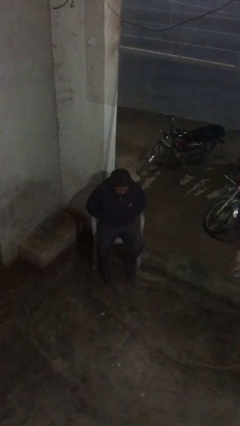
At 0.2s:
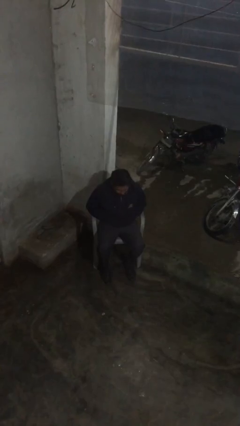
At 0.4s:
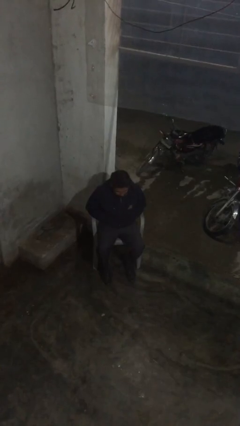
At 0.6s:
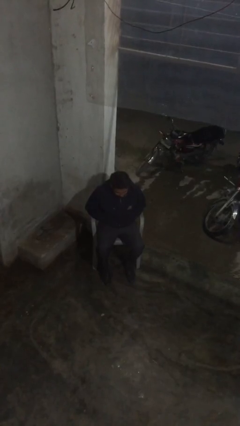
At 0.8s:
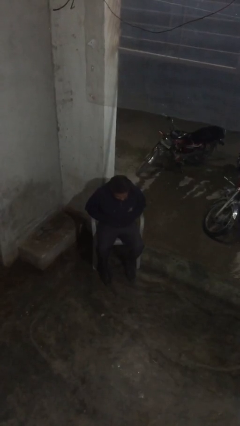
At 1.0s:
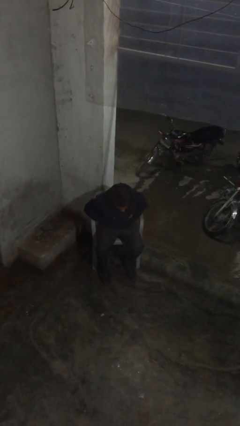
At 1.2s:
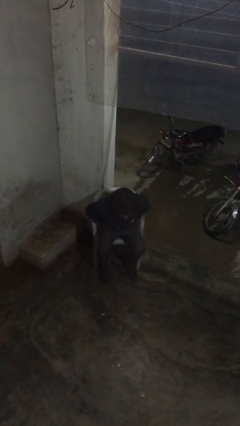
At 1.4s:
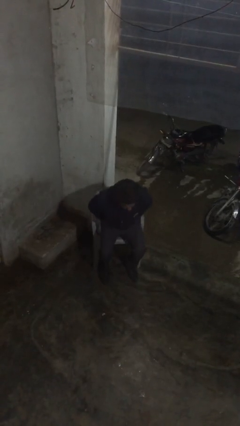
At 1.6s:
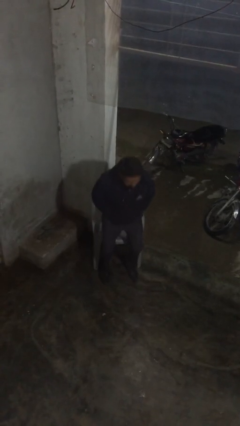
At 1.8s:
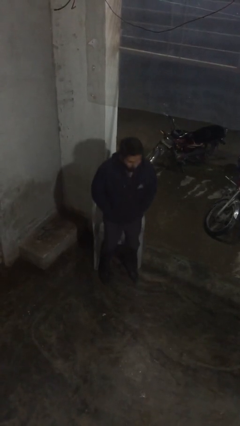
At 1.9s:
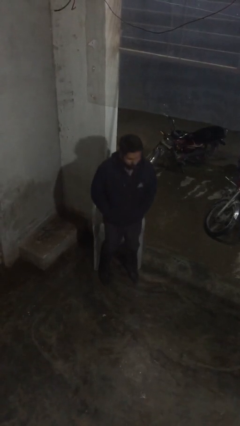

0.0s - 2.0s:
person stands up

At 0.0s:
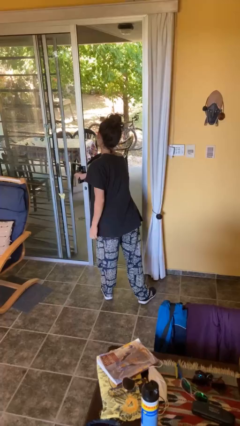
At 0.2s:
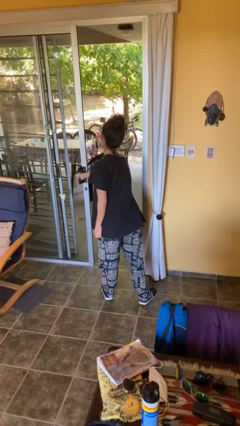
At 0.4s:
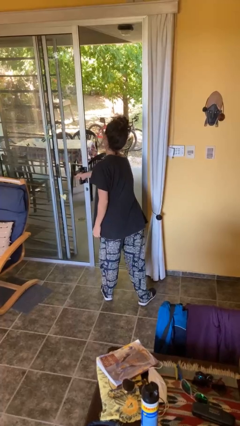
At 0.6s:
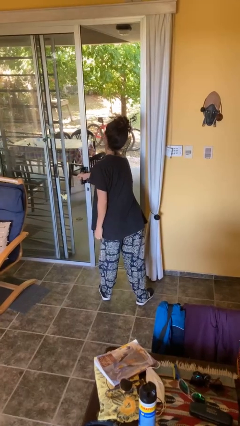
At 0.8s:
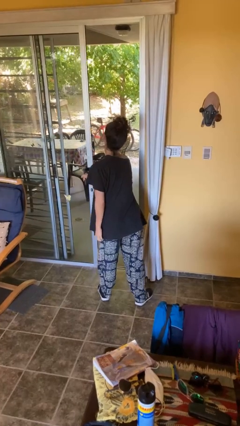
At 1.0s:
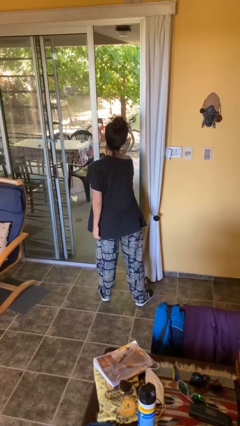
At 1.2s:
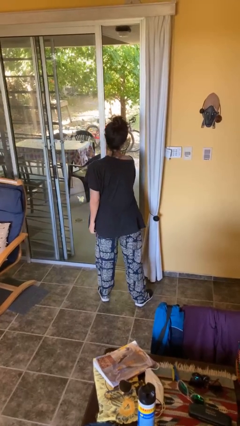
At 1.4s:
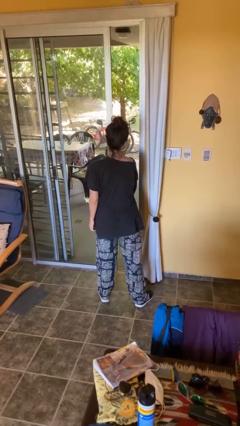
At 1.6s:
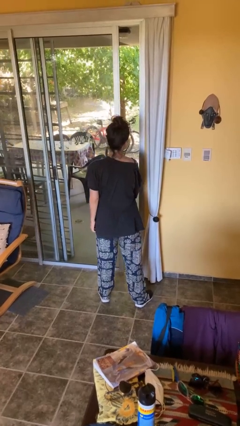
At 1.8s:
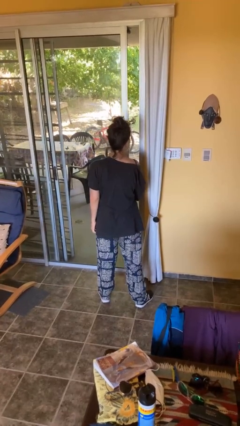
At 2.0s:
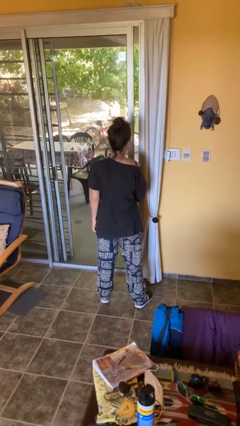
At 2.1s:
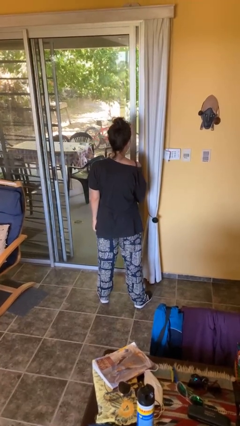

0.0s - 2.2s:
person closes facility door

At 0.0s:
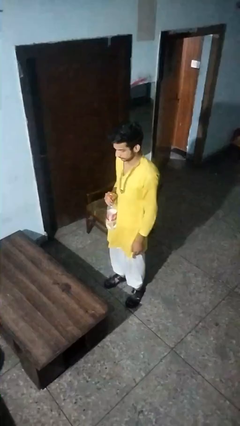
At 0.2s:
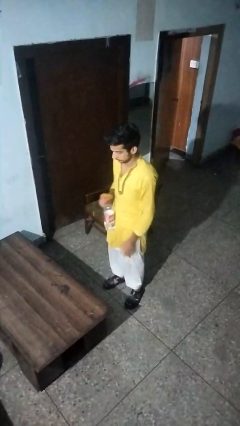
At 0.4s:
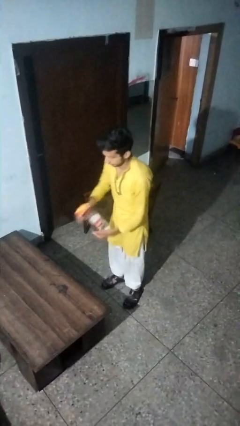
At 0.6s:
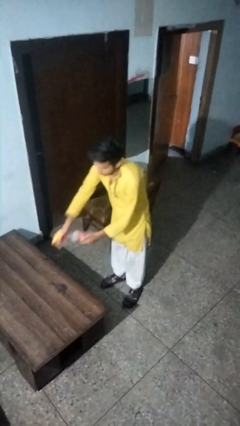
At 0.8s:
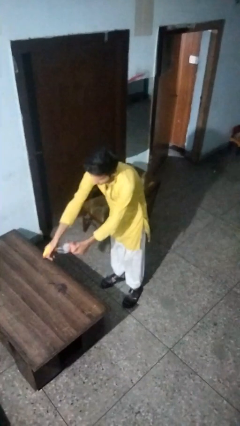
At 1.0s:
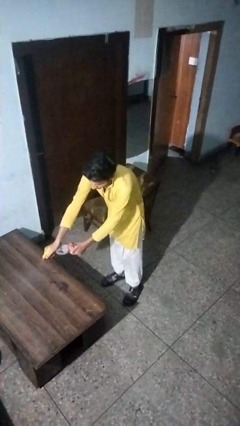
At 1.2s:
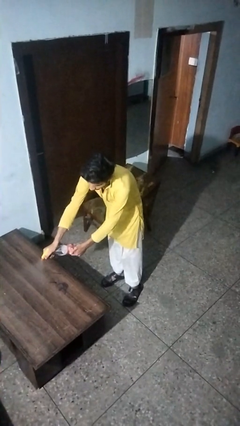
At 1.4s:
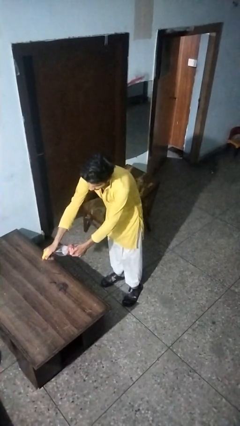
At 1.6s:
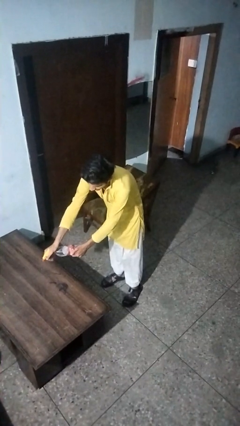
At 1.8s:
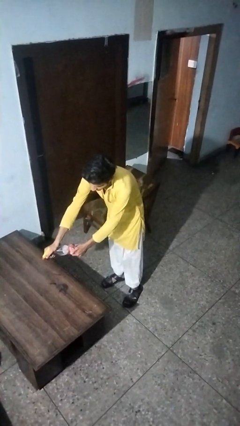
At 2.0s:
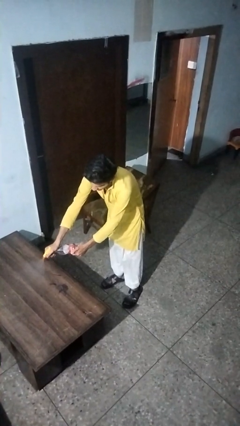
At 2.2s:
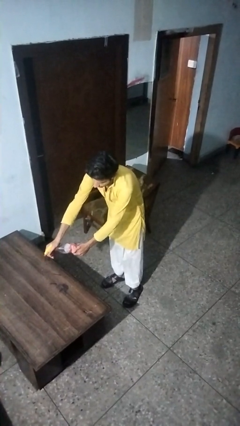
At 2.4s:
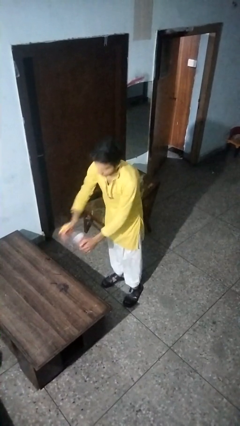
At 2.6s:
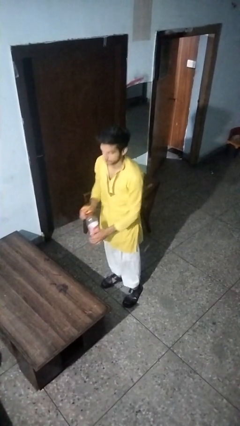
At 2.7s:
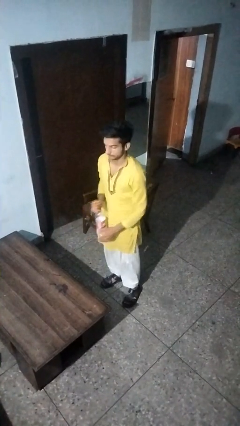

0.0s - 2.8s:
person sprays from bottle

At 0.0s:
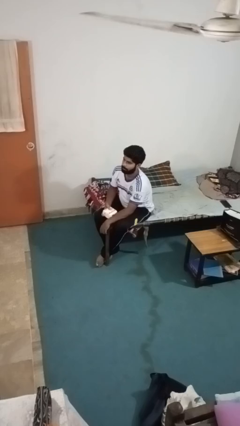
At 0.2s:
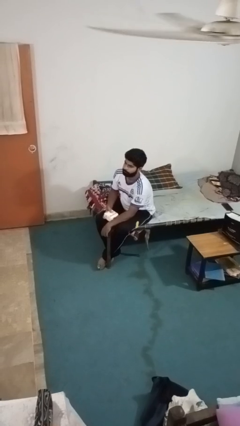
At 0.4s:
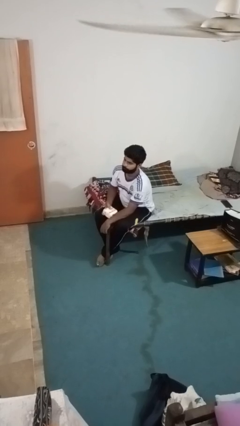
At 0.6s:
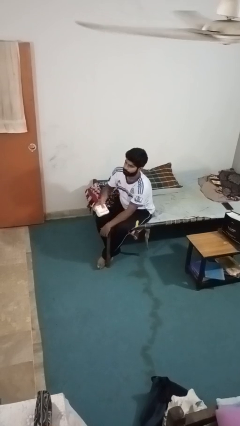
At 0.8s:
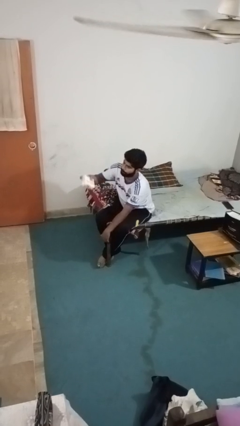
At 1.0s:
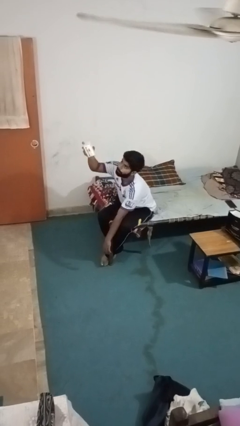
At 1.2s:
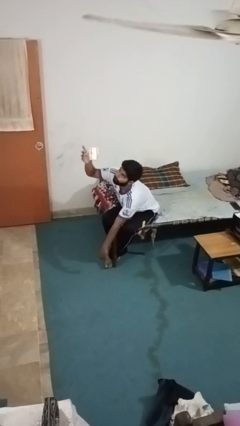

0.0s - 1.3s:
person drops object

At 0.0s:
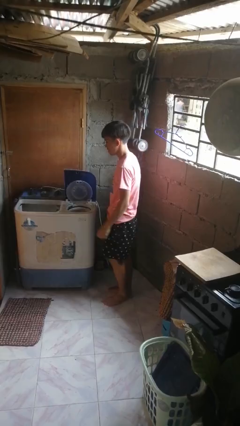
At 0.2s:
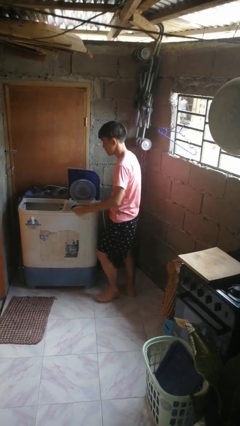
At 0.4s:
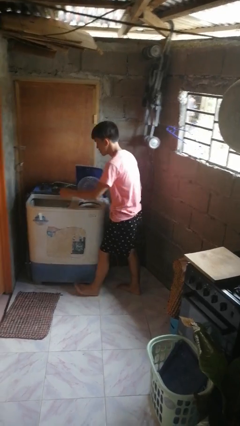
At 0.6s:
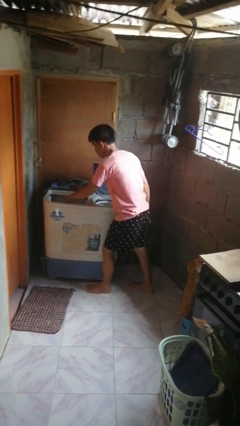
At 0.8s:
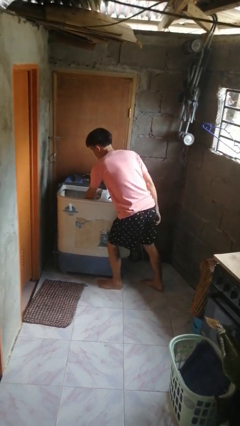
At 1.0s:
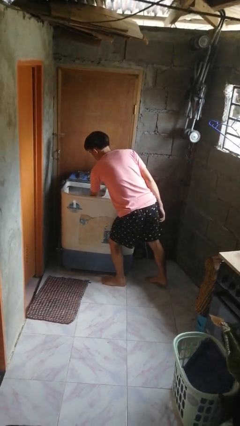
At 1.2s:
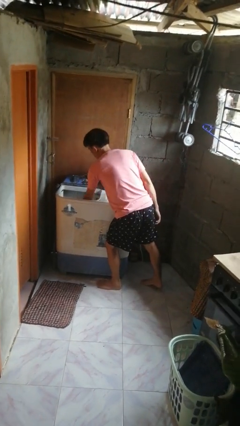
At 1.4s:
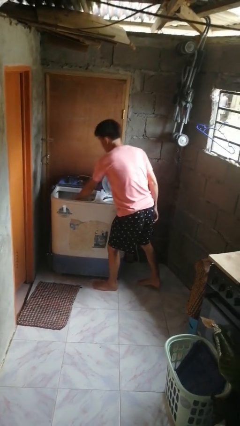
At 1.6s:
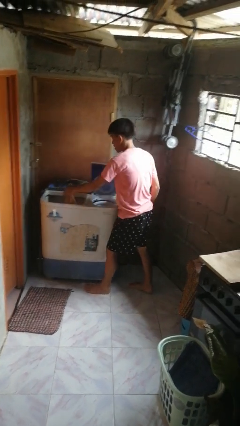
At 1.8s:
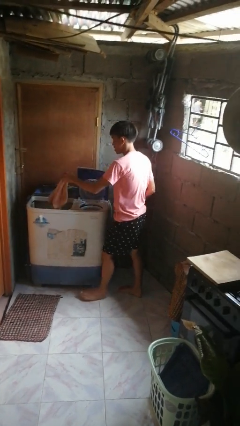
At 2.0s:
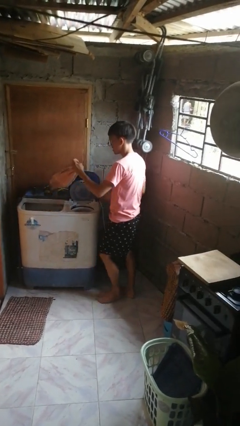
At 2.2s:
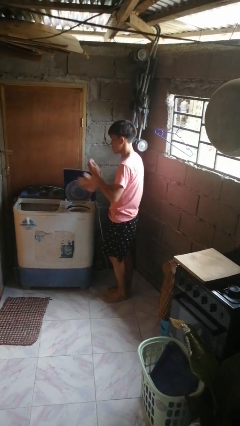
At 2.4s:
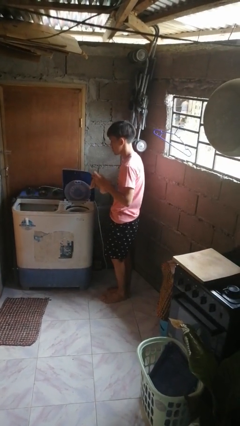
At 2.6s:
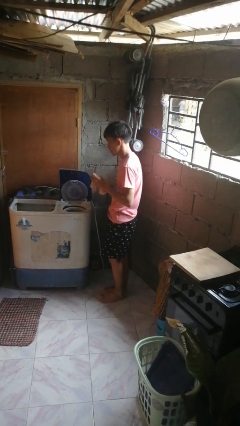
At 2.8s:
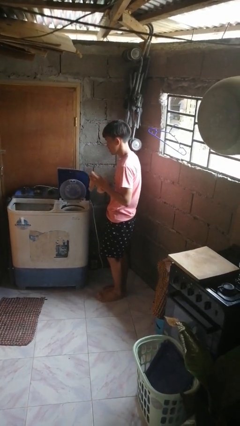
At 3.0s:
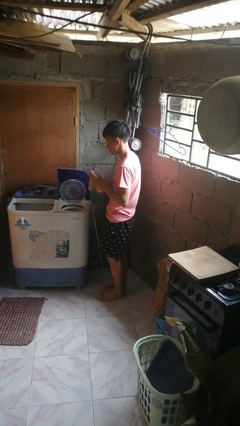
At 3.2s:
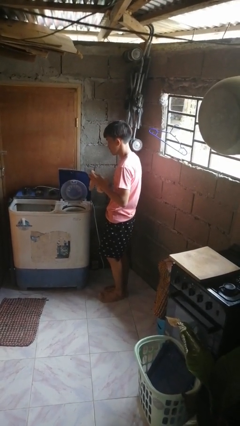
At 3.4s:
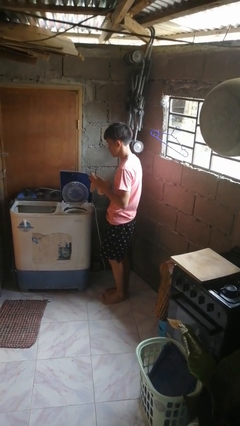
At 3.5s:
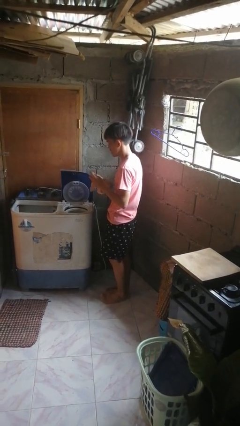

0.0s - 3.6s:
person unloads clotheswasher

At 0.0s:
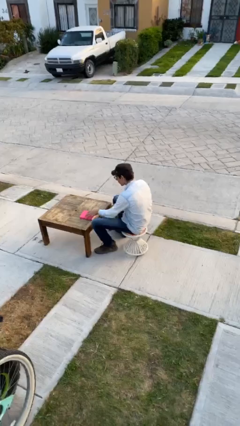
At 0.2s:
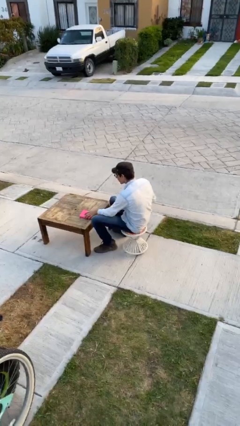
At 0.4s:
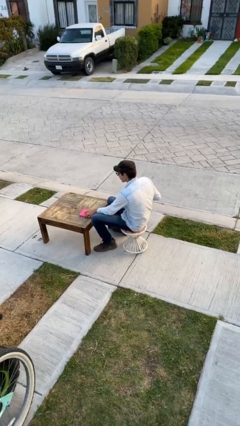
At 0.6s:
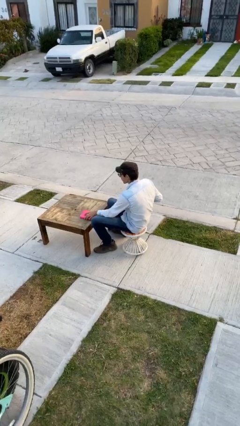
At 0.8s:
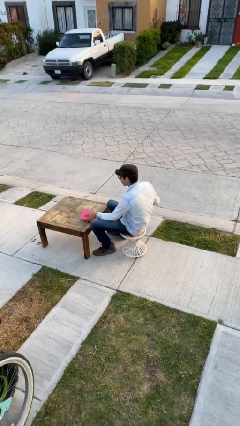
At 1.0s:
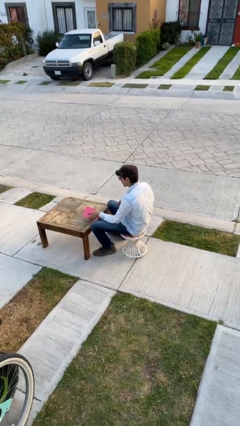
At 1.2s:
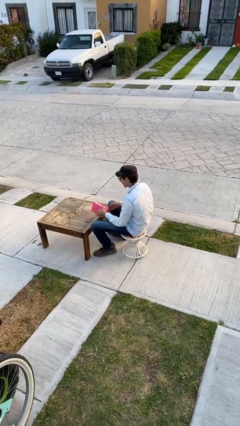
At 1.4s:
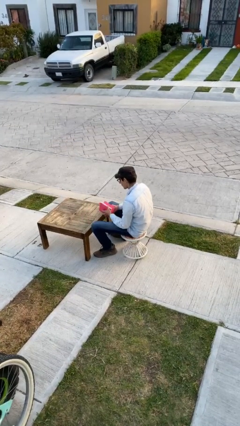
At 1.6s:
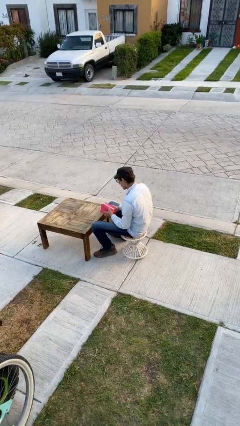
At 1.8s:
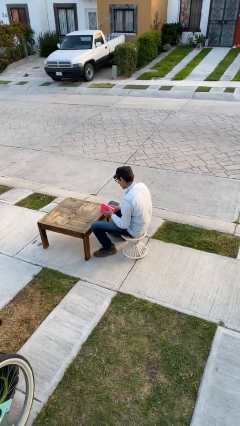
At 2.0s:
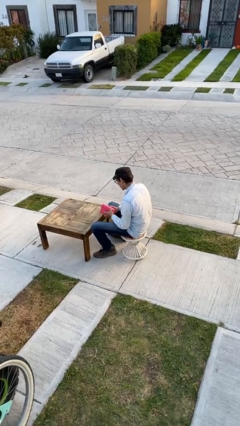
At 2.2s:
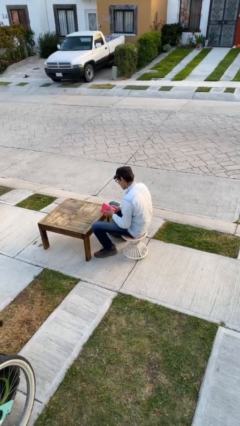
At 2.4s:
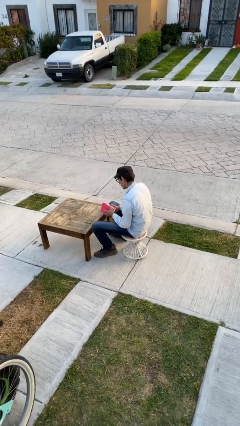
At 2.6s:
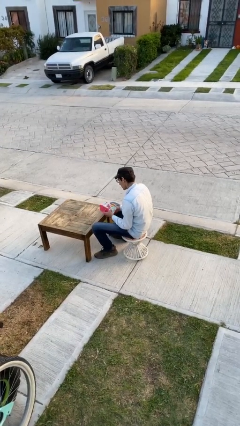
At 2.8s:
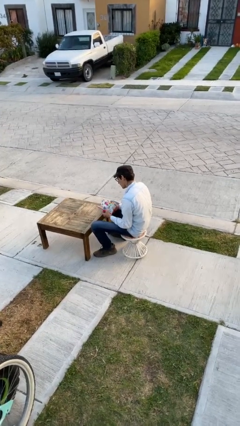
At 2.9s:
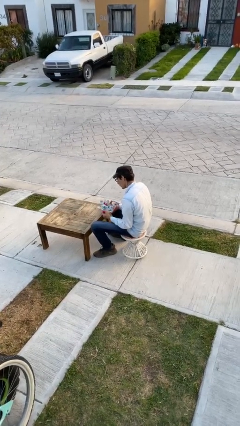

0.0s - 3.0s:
person picks up object from table

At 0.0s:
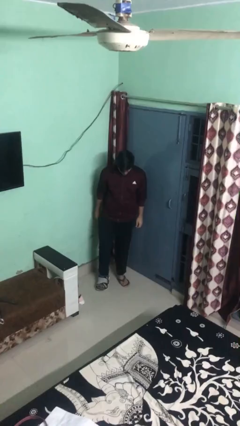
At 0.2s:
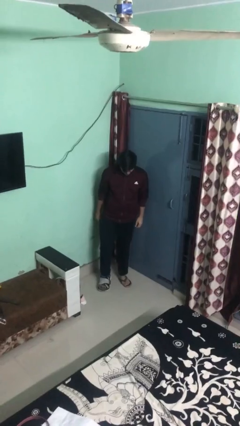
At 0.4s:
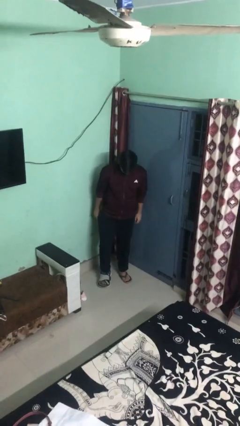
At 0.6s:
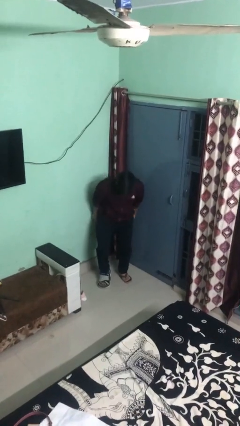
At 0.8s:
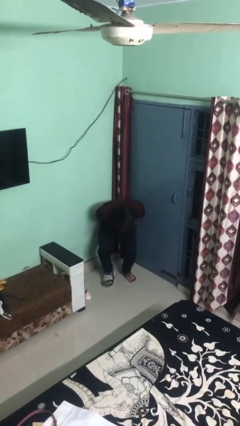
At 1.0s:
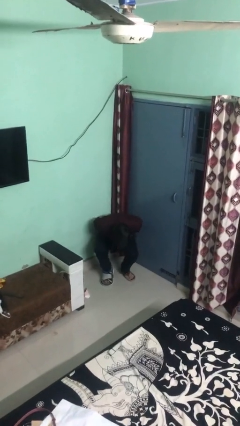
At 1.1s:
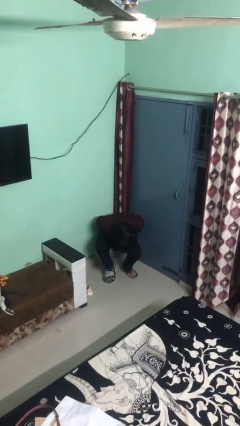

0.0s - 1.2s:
person sits down

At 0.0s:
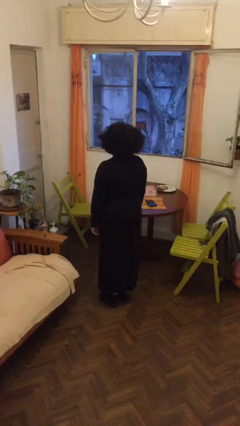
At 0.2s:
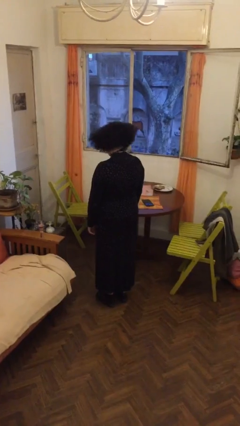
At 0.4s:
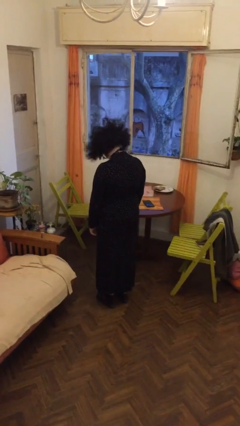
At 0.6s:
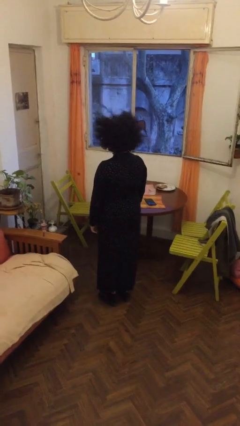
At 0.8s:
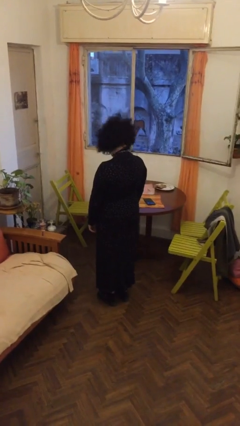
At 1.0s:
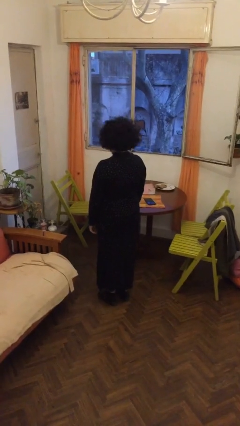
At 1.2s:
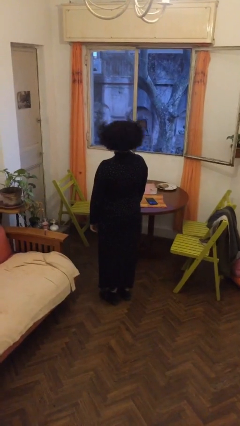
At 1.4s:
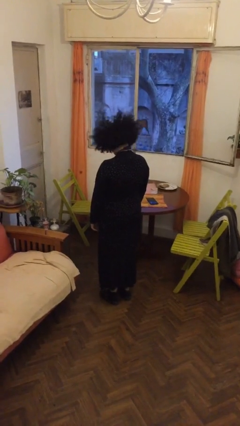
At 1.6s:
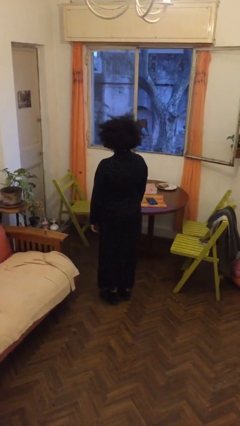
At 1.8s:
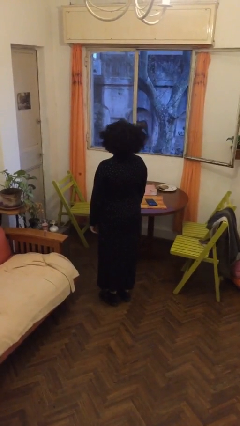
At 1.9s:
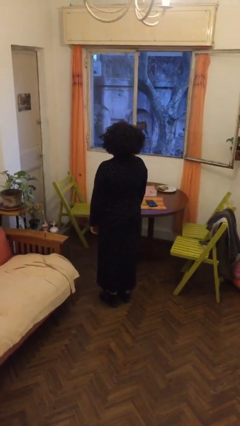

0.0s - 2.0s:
person nods head
